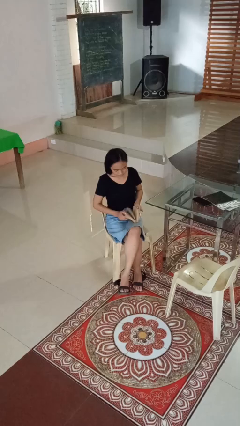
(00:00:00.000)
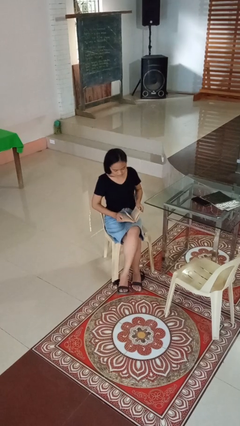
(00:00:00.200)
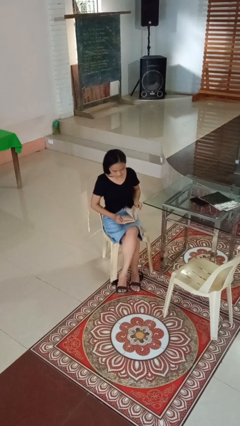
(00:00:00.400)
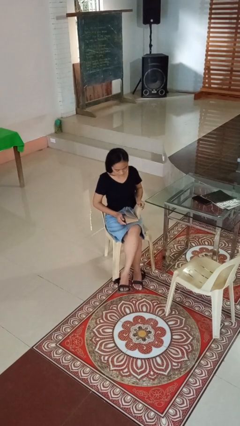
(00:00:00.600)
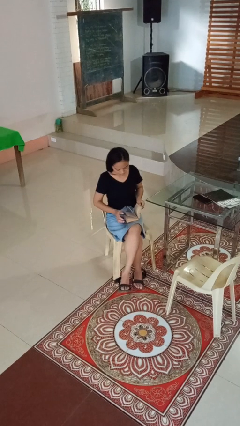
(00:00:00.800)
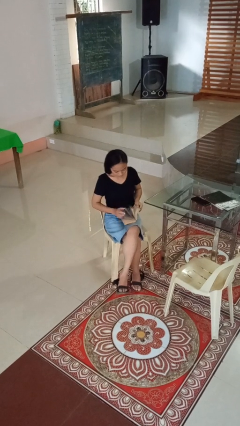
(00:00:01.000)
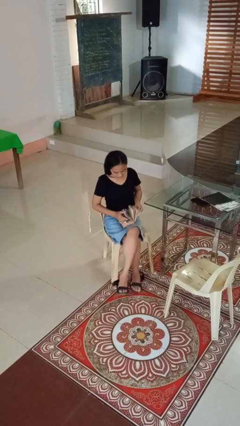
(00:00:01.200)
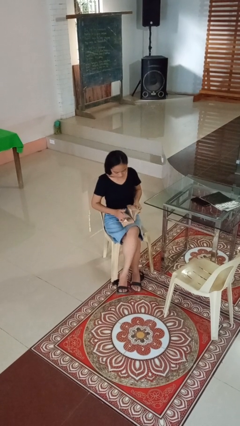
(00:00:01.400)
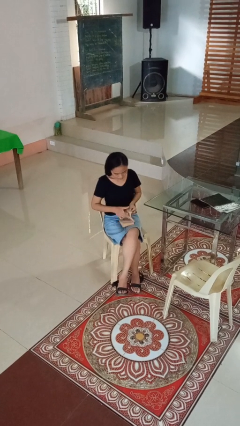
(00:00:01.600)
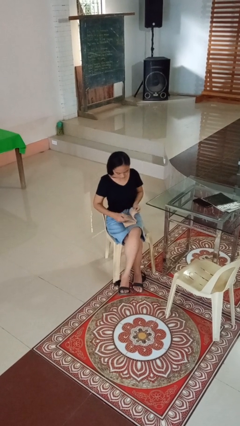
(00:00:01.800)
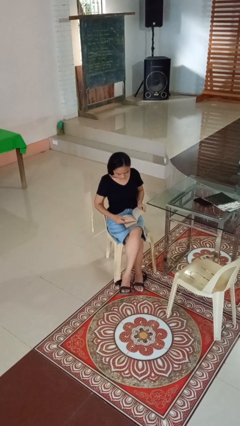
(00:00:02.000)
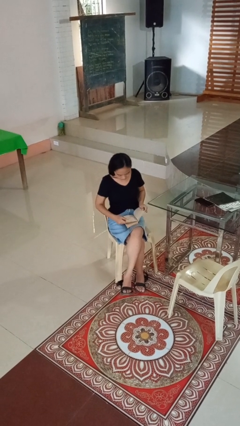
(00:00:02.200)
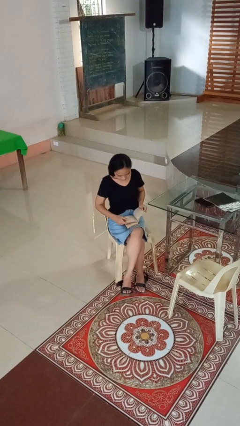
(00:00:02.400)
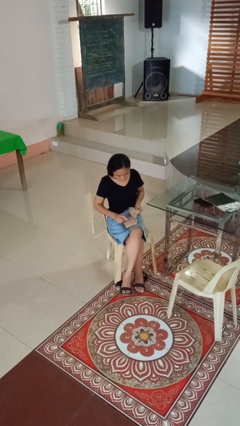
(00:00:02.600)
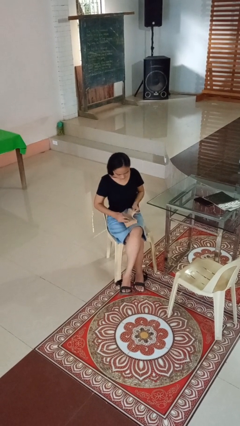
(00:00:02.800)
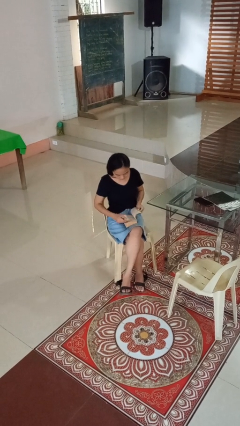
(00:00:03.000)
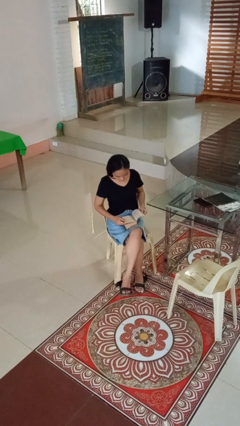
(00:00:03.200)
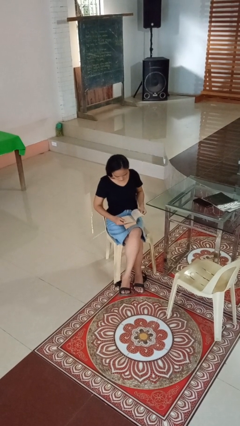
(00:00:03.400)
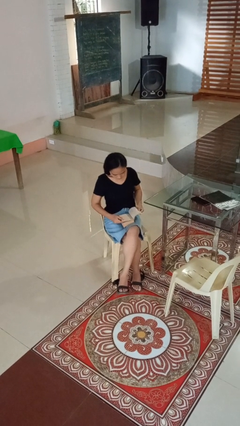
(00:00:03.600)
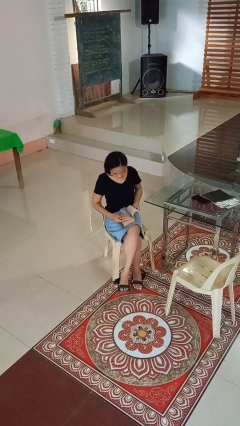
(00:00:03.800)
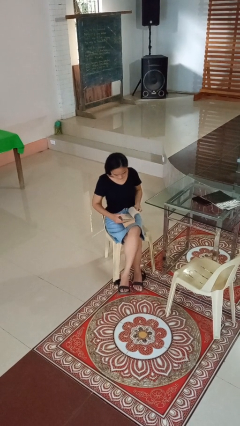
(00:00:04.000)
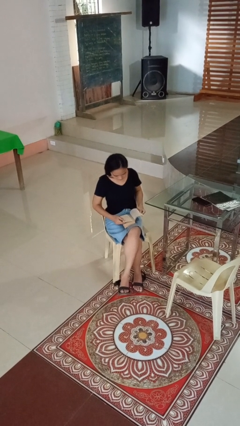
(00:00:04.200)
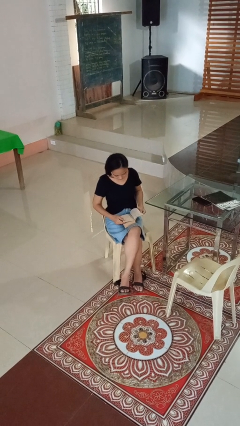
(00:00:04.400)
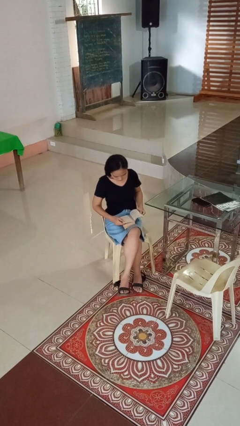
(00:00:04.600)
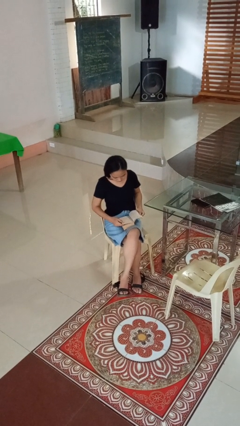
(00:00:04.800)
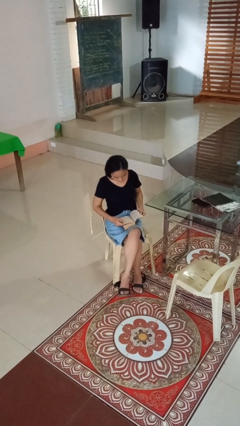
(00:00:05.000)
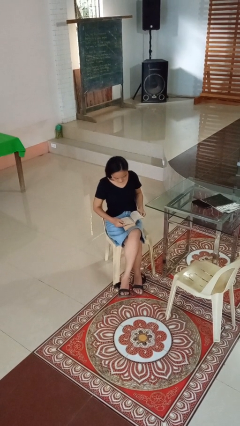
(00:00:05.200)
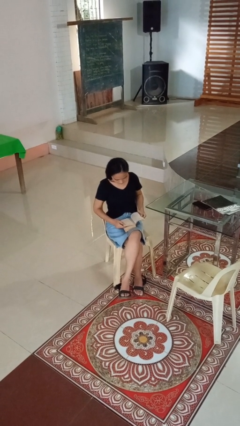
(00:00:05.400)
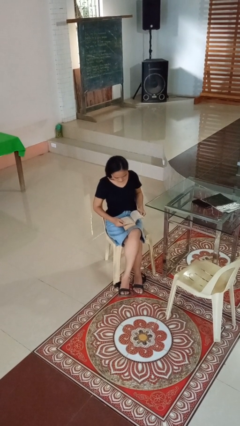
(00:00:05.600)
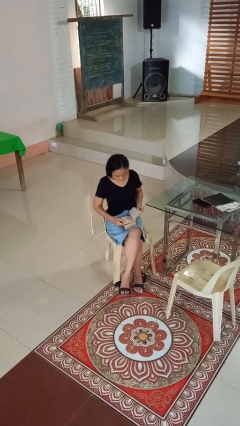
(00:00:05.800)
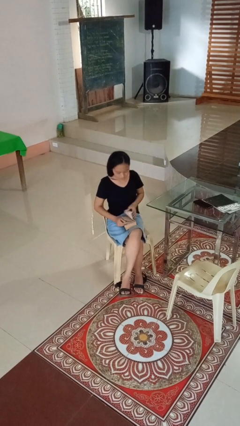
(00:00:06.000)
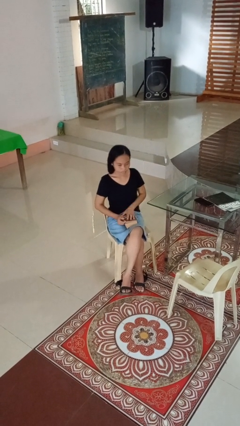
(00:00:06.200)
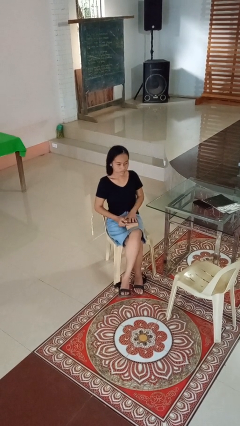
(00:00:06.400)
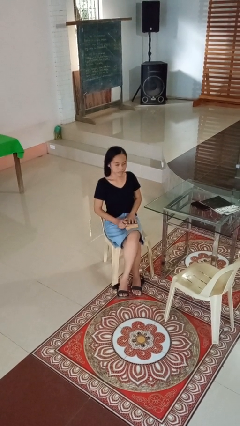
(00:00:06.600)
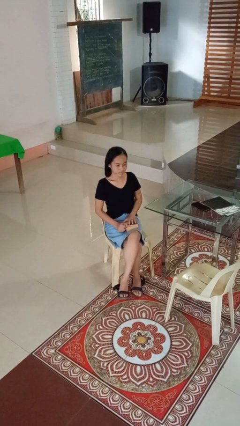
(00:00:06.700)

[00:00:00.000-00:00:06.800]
person reads book

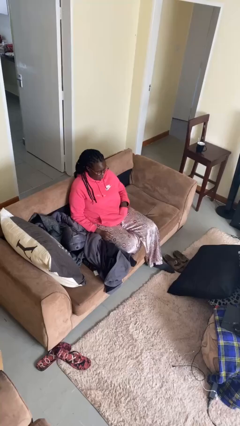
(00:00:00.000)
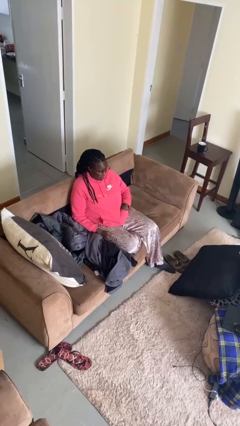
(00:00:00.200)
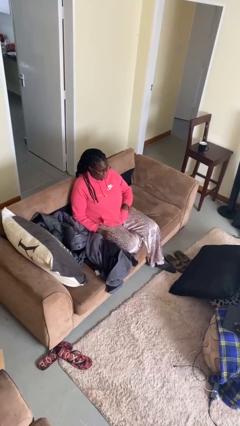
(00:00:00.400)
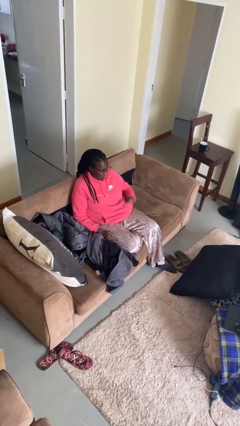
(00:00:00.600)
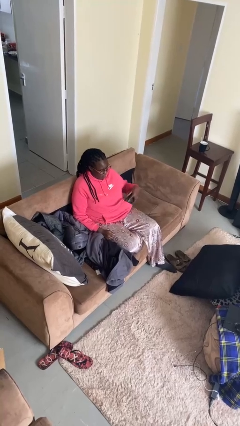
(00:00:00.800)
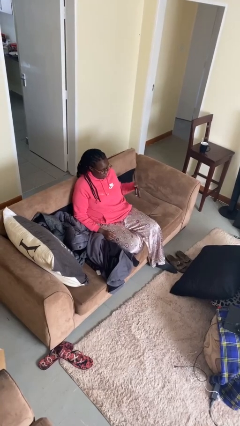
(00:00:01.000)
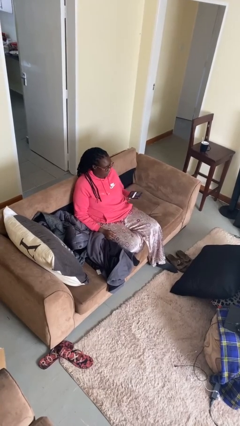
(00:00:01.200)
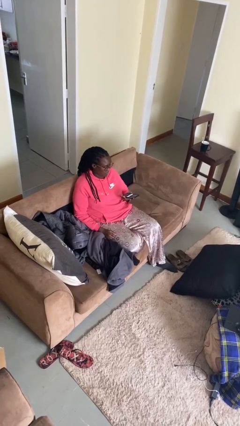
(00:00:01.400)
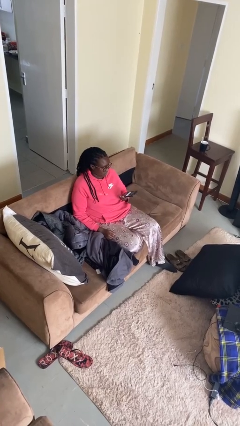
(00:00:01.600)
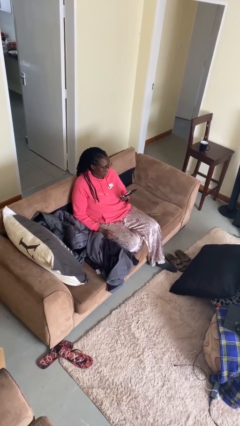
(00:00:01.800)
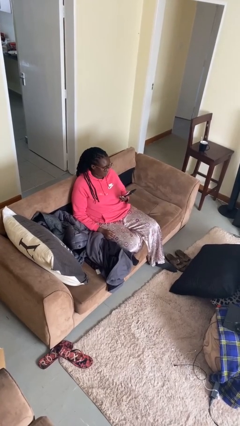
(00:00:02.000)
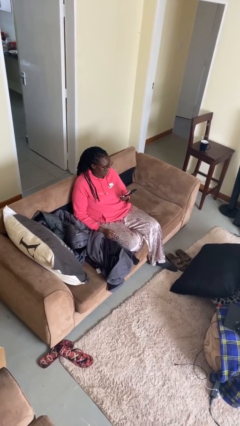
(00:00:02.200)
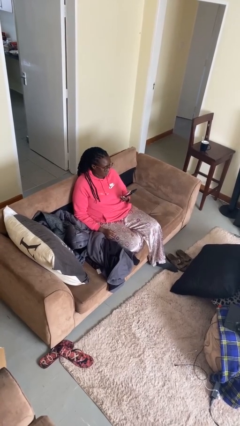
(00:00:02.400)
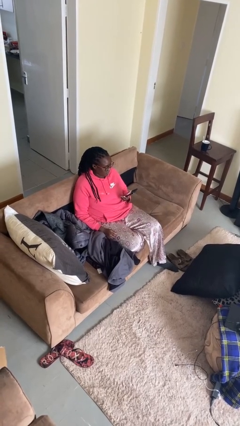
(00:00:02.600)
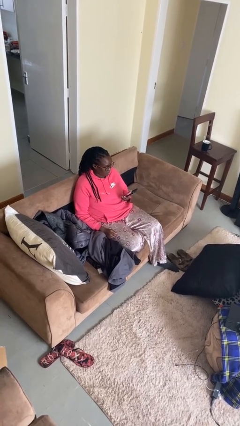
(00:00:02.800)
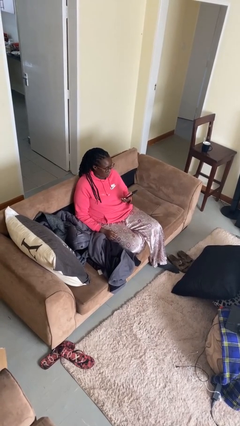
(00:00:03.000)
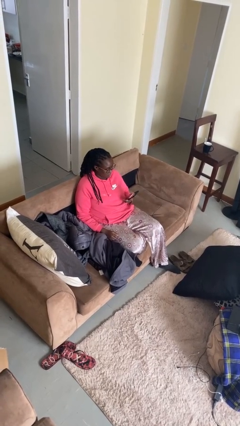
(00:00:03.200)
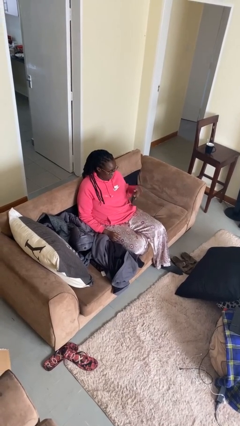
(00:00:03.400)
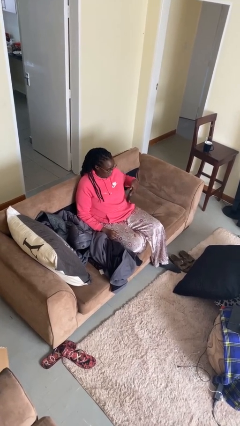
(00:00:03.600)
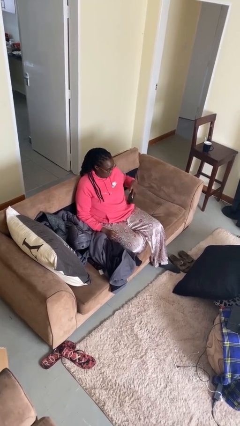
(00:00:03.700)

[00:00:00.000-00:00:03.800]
person takes phone from pocket

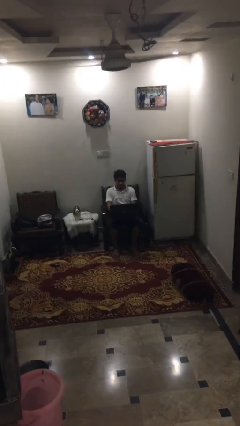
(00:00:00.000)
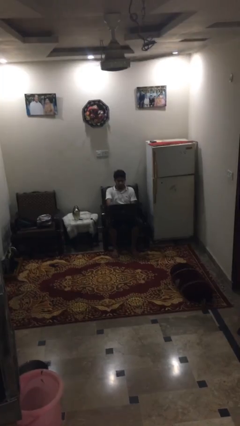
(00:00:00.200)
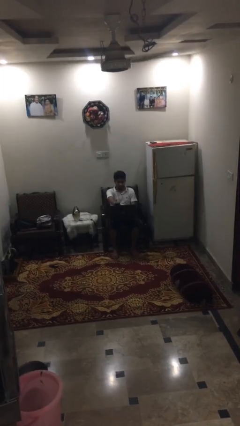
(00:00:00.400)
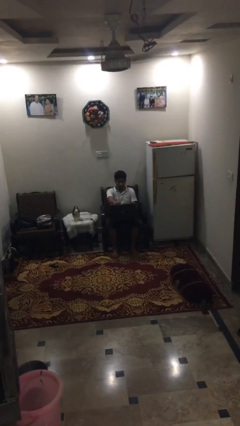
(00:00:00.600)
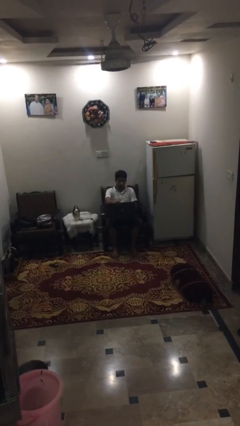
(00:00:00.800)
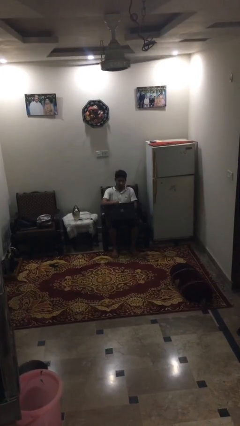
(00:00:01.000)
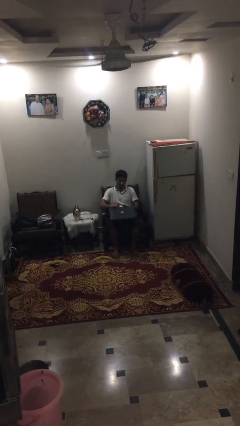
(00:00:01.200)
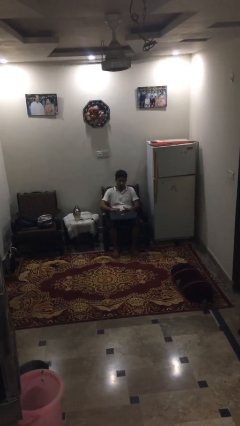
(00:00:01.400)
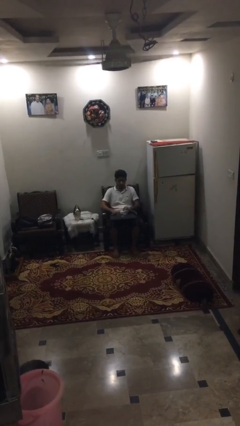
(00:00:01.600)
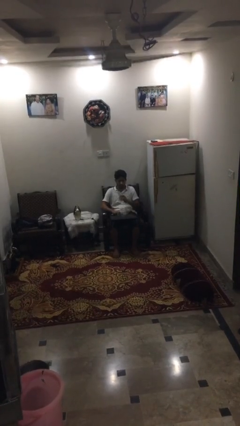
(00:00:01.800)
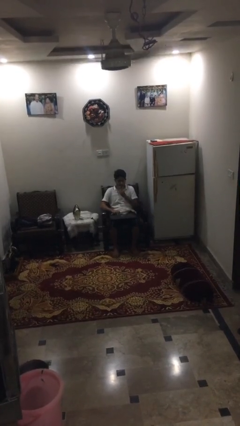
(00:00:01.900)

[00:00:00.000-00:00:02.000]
person closes laptop

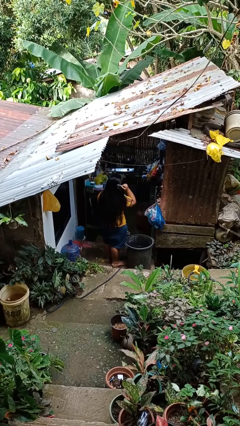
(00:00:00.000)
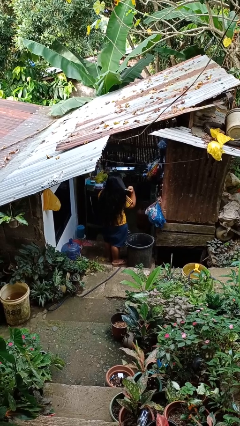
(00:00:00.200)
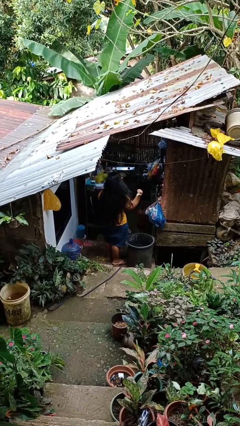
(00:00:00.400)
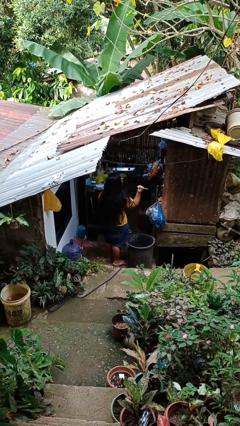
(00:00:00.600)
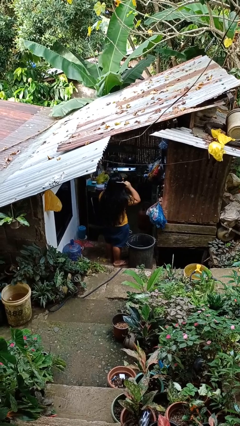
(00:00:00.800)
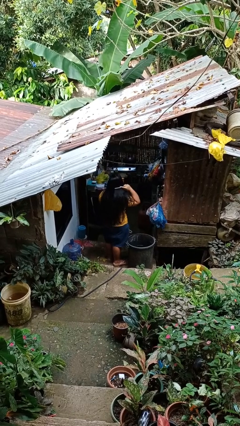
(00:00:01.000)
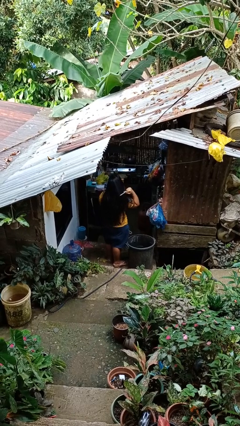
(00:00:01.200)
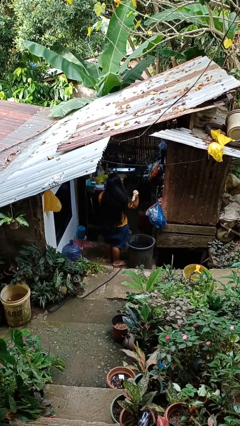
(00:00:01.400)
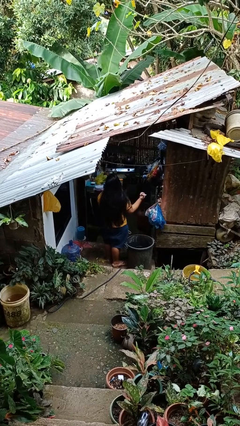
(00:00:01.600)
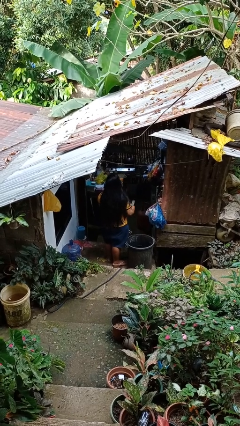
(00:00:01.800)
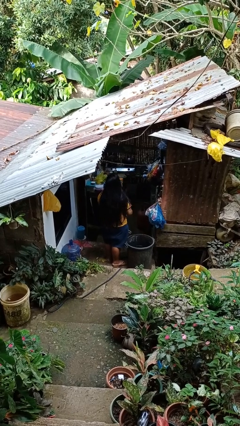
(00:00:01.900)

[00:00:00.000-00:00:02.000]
person brushes hair

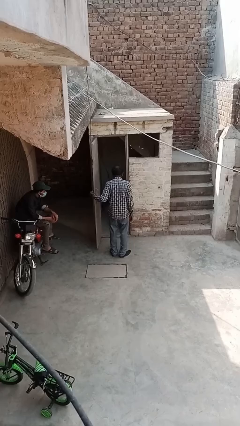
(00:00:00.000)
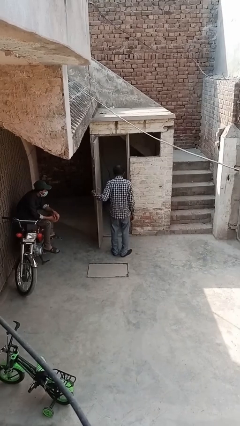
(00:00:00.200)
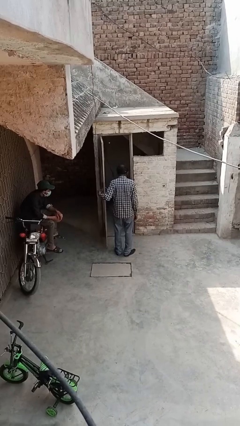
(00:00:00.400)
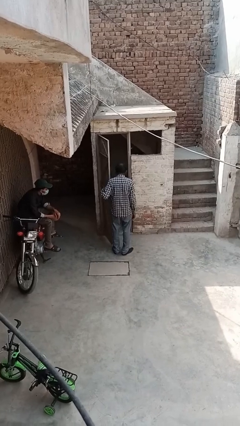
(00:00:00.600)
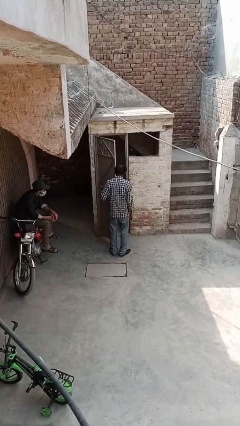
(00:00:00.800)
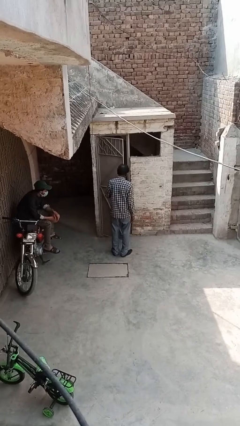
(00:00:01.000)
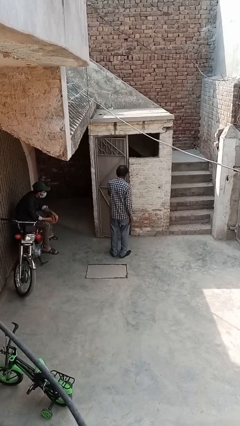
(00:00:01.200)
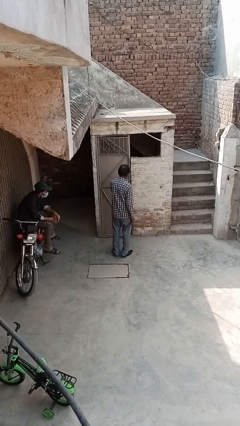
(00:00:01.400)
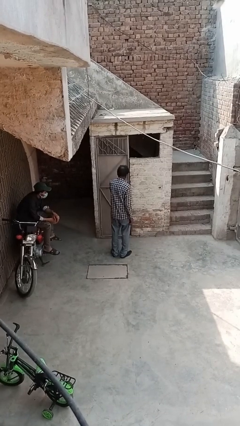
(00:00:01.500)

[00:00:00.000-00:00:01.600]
person closes facility door

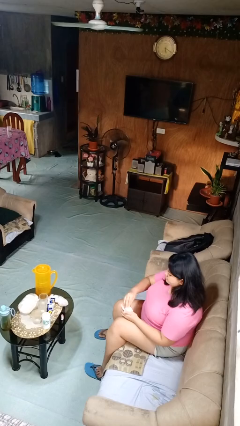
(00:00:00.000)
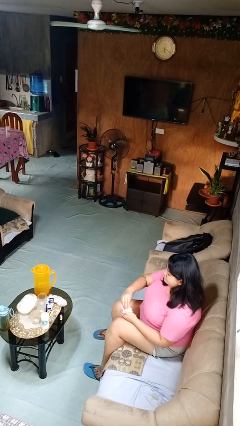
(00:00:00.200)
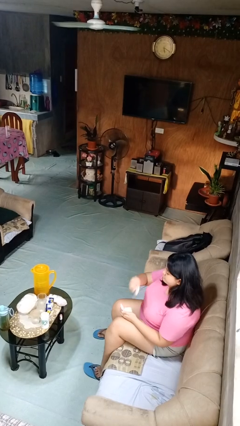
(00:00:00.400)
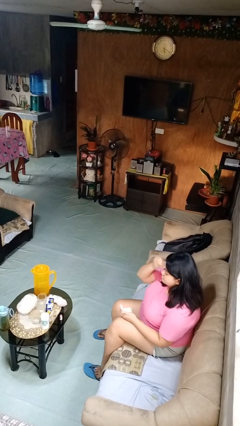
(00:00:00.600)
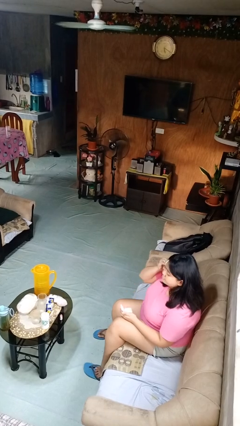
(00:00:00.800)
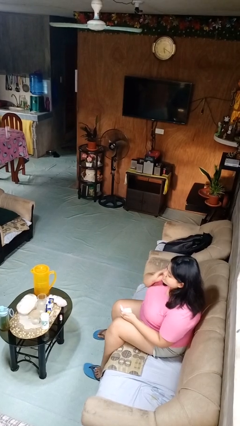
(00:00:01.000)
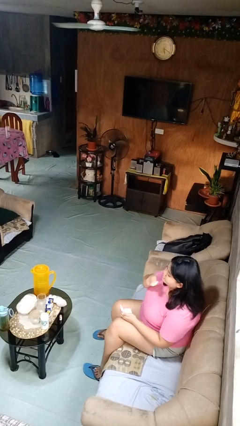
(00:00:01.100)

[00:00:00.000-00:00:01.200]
person applies foundation makeup
